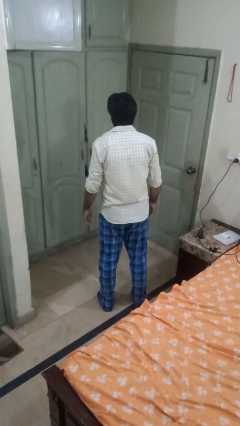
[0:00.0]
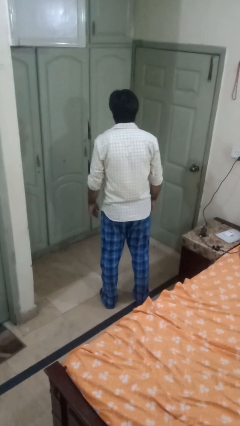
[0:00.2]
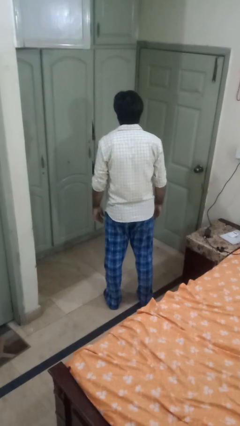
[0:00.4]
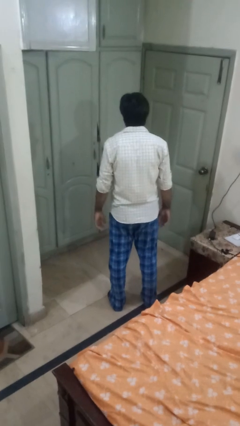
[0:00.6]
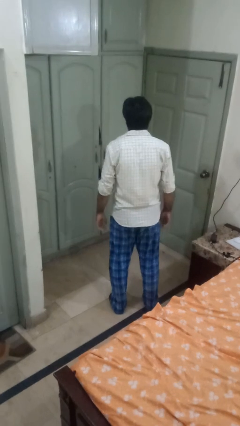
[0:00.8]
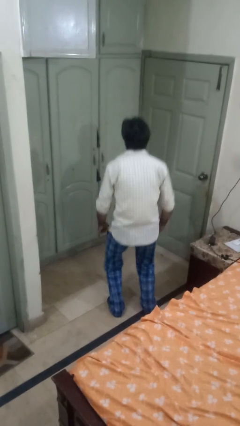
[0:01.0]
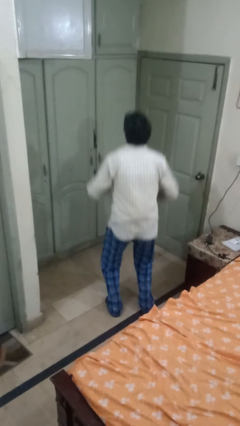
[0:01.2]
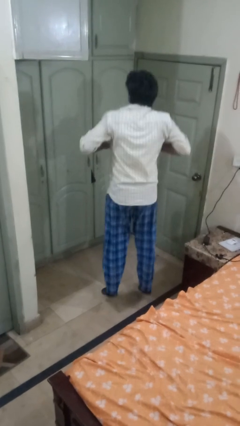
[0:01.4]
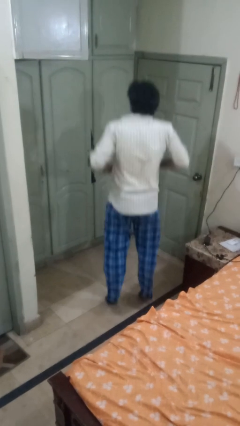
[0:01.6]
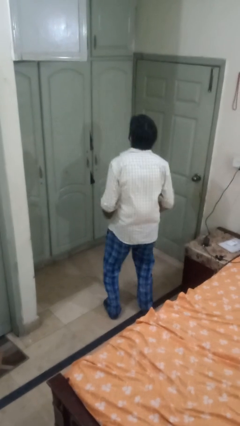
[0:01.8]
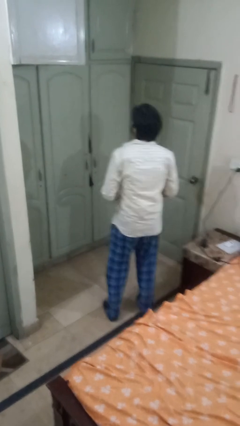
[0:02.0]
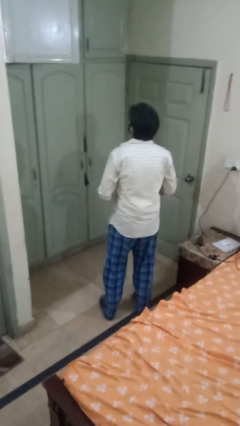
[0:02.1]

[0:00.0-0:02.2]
person jumps

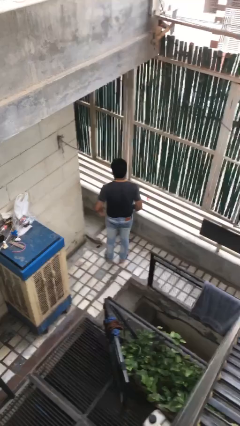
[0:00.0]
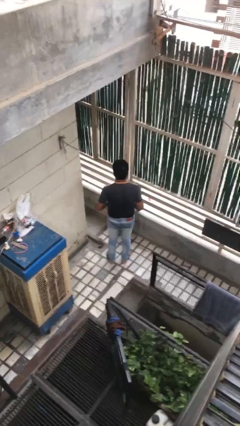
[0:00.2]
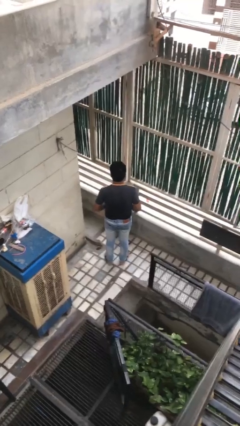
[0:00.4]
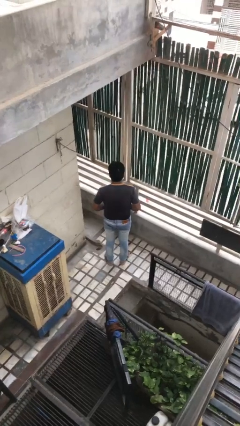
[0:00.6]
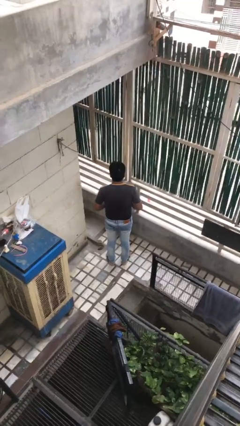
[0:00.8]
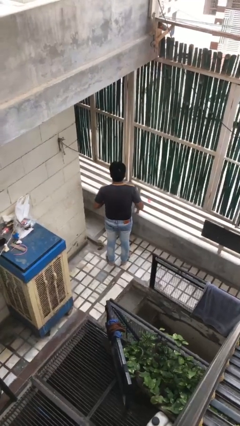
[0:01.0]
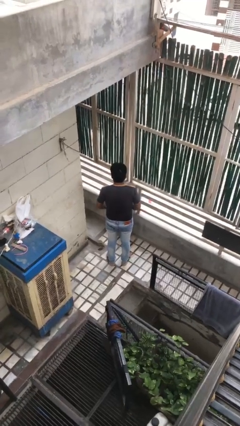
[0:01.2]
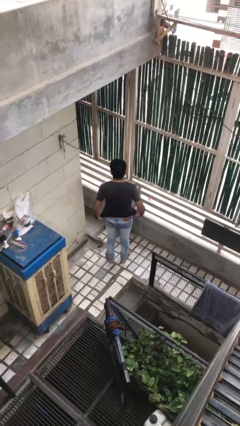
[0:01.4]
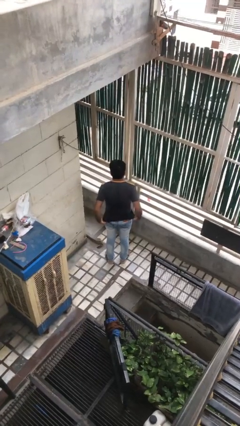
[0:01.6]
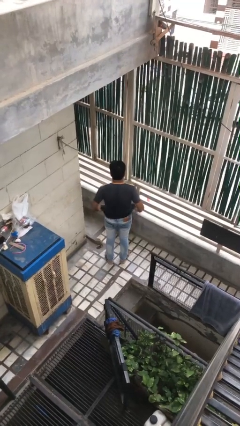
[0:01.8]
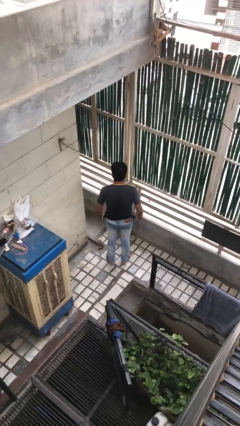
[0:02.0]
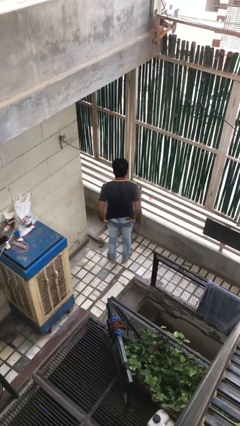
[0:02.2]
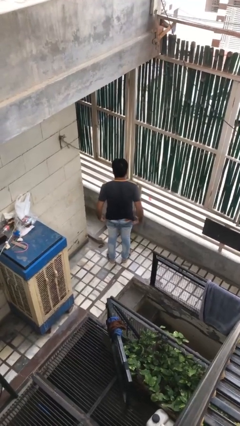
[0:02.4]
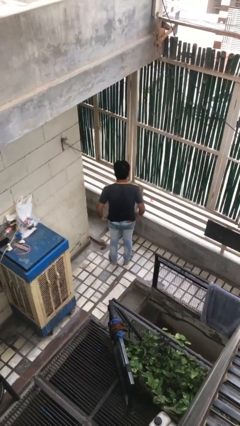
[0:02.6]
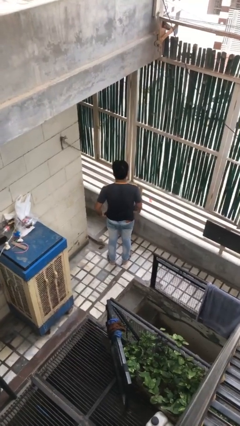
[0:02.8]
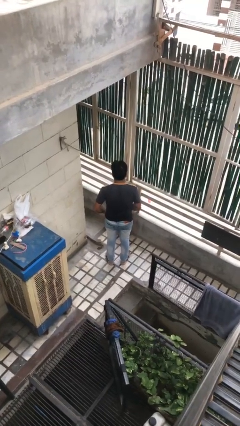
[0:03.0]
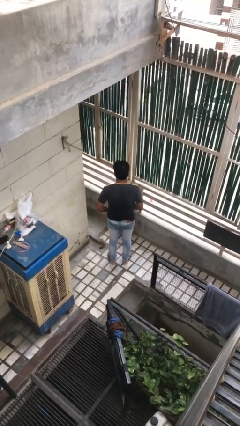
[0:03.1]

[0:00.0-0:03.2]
person untucks shirt

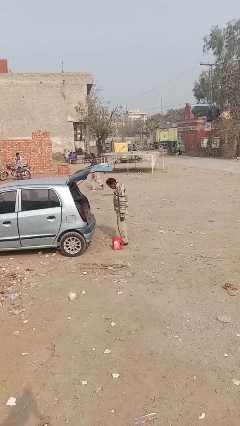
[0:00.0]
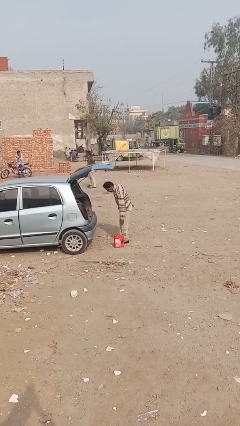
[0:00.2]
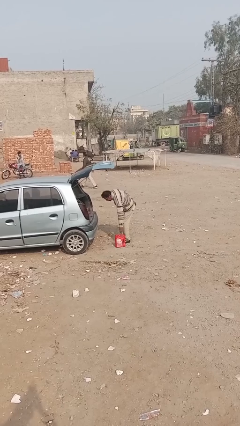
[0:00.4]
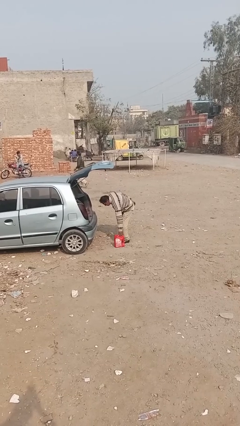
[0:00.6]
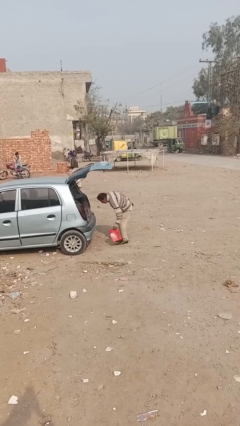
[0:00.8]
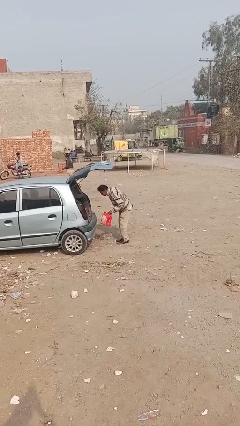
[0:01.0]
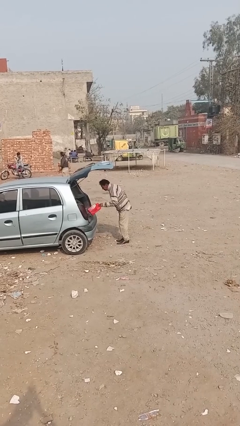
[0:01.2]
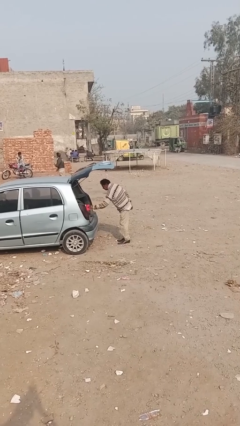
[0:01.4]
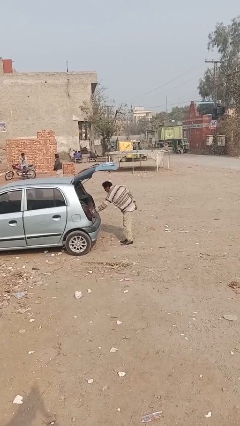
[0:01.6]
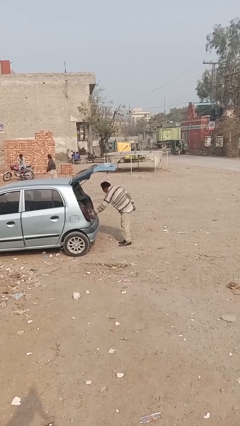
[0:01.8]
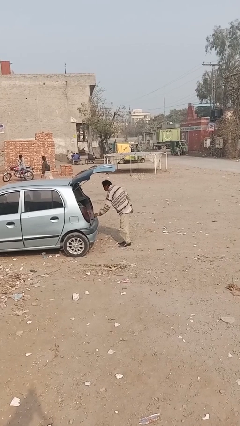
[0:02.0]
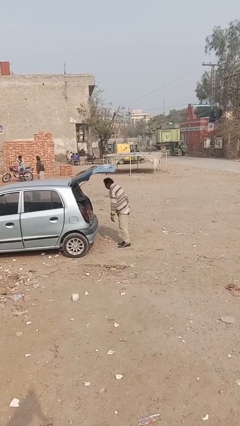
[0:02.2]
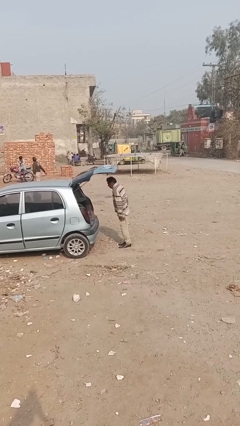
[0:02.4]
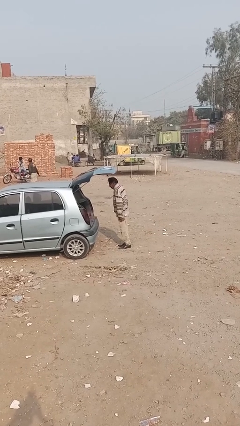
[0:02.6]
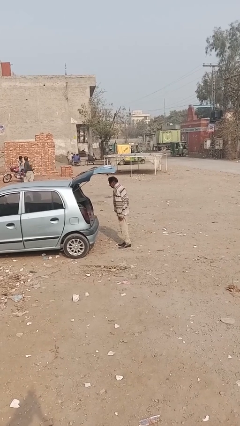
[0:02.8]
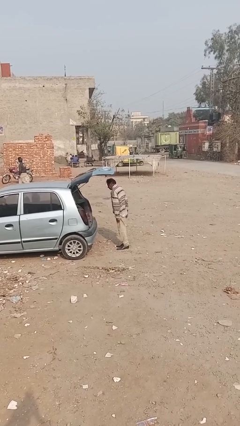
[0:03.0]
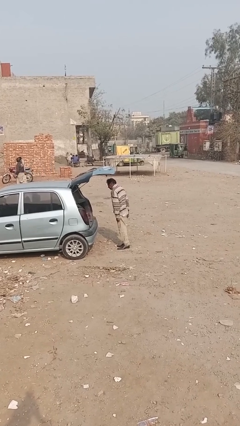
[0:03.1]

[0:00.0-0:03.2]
person loads car

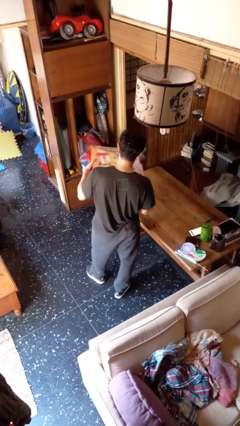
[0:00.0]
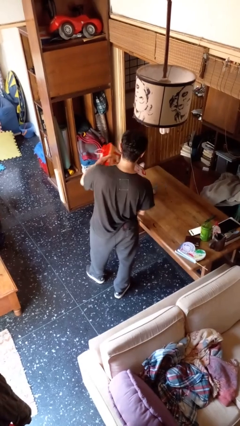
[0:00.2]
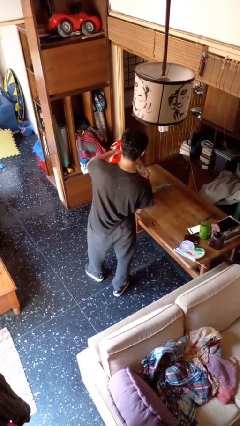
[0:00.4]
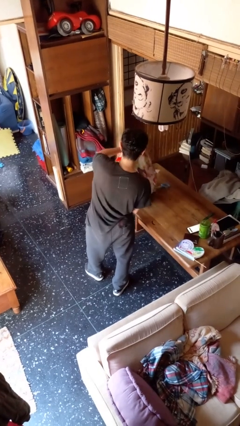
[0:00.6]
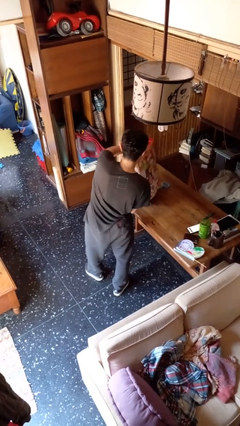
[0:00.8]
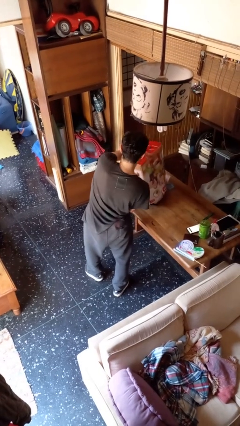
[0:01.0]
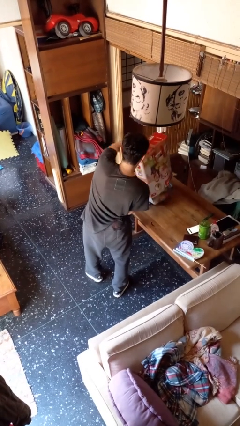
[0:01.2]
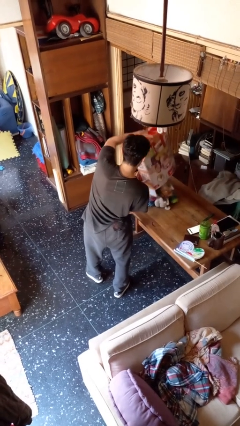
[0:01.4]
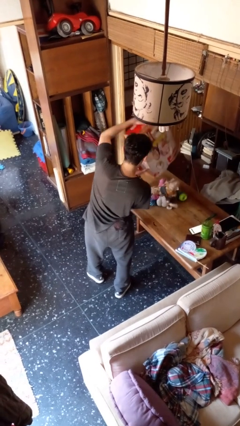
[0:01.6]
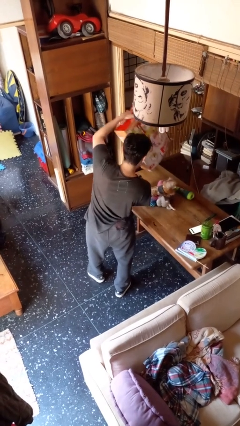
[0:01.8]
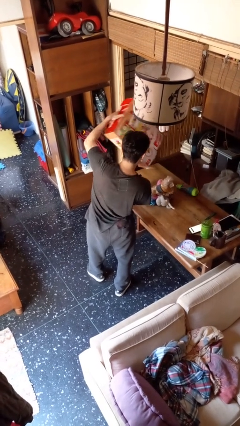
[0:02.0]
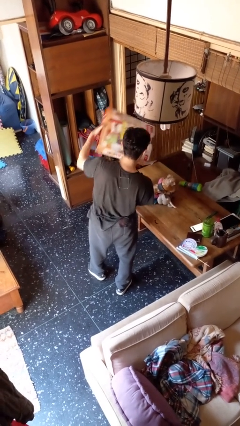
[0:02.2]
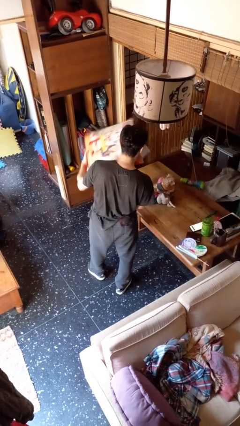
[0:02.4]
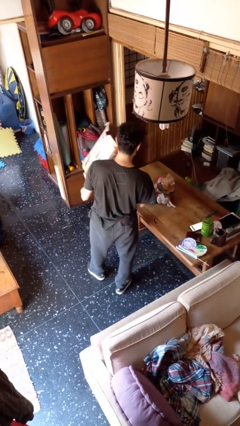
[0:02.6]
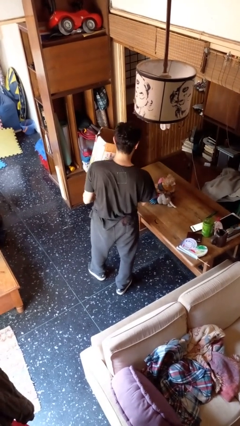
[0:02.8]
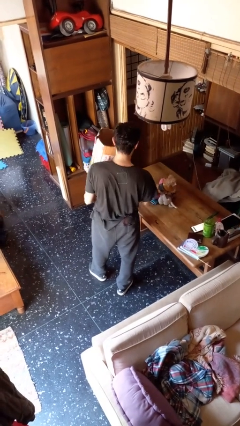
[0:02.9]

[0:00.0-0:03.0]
person unloads box onto table

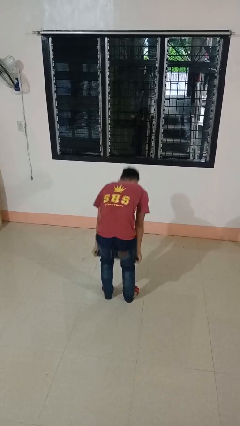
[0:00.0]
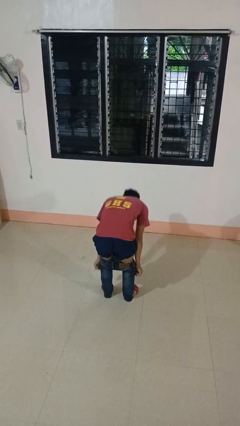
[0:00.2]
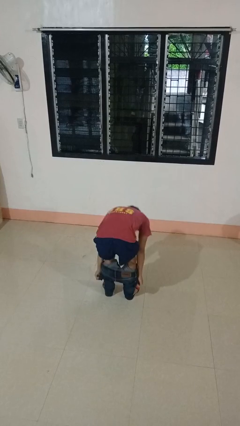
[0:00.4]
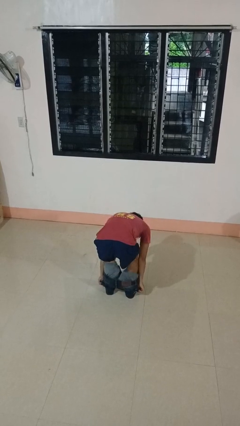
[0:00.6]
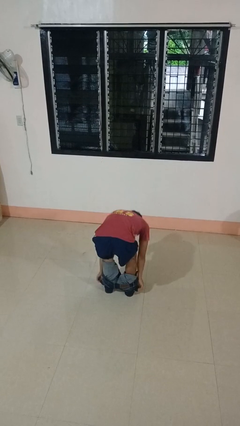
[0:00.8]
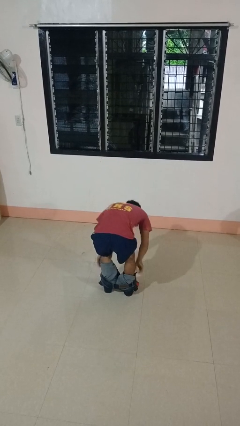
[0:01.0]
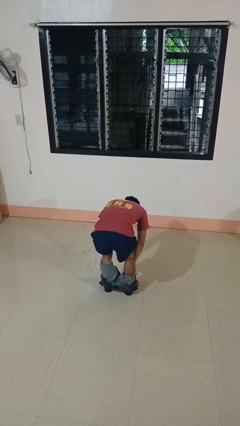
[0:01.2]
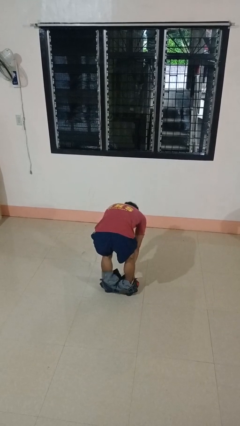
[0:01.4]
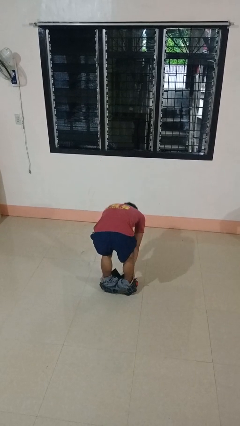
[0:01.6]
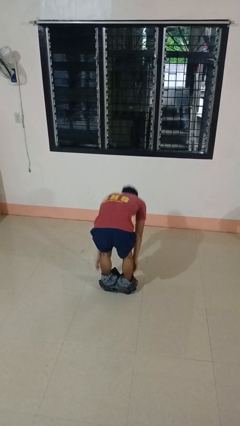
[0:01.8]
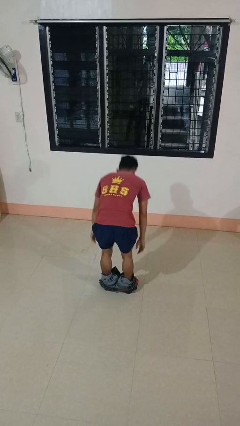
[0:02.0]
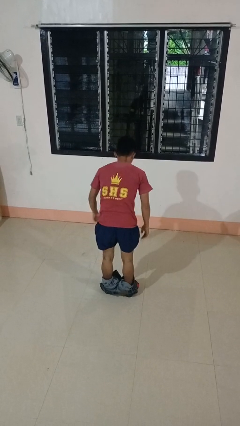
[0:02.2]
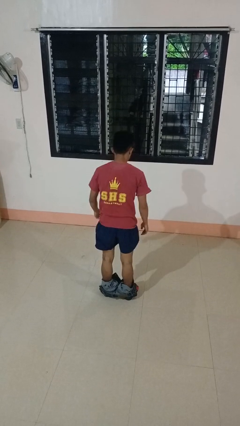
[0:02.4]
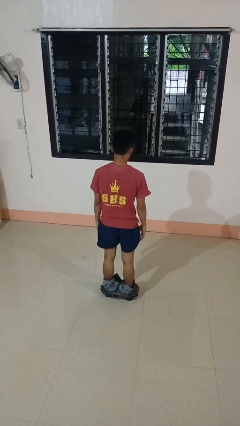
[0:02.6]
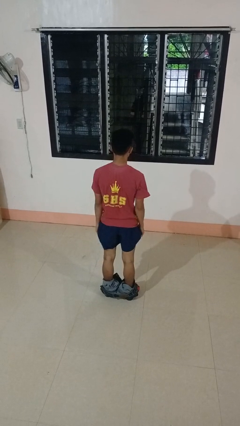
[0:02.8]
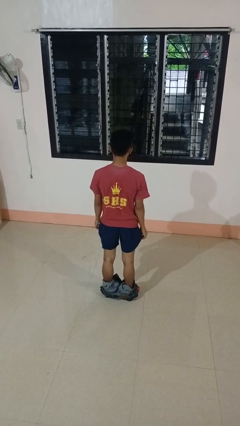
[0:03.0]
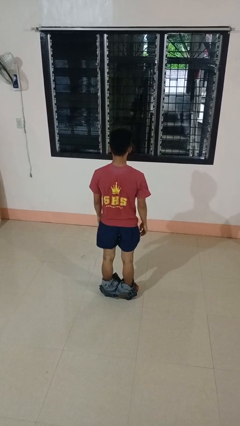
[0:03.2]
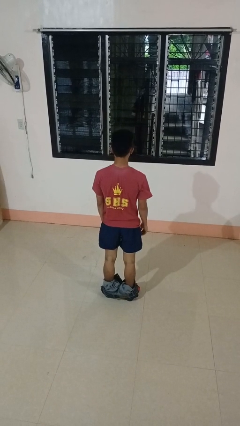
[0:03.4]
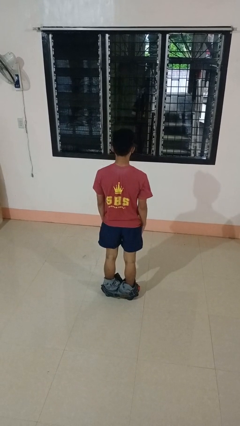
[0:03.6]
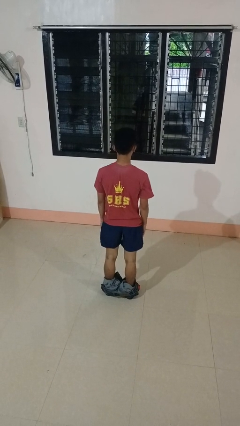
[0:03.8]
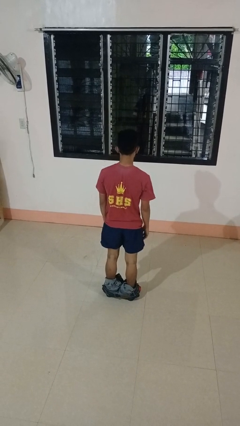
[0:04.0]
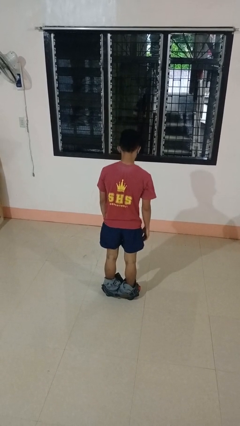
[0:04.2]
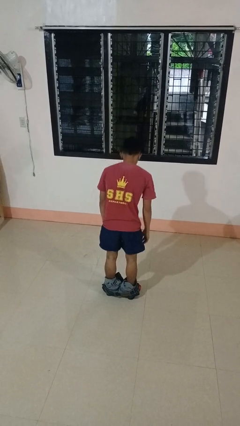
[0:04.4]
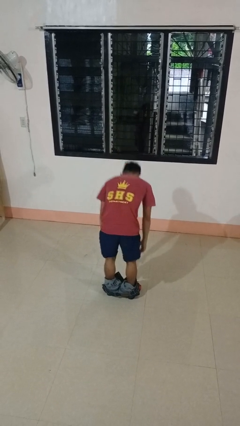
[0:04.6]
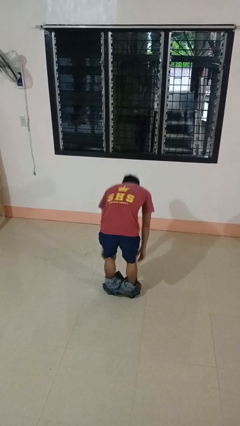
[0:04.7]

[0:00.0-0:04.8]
person takes off pants

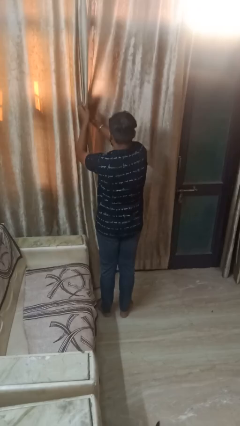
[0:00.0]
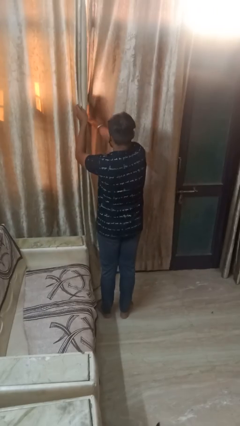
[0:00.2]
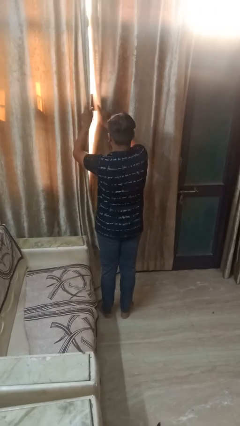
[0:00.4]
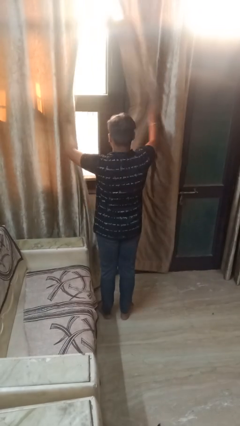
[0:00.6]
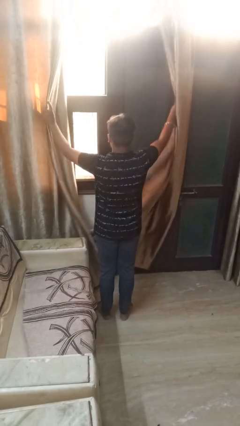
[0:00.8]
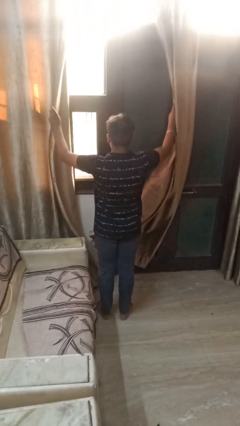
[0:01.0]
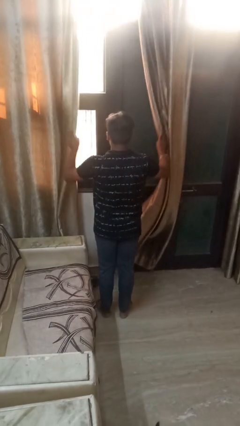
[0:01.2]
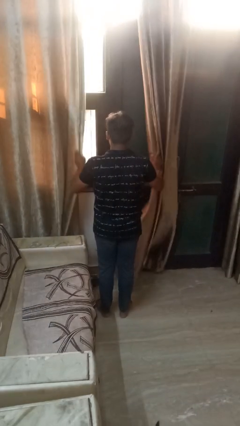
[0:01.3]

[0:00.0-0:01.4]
person opens curtains
